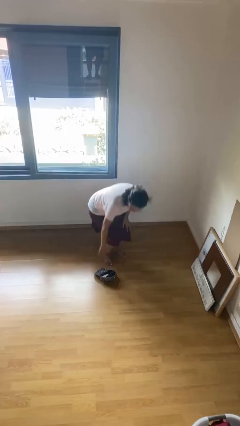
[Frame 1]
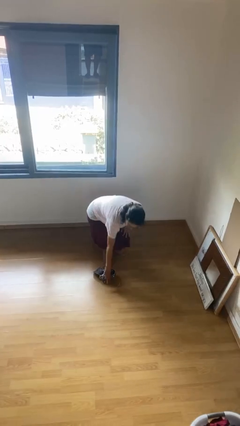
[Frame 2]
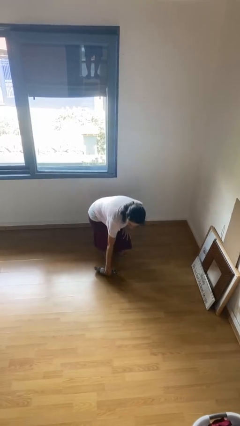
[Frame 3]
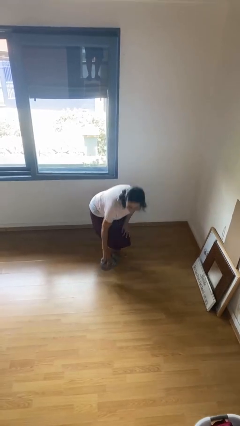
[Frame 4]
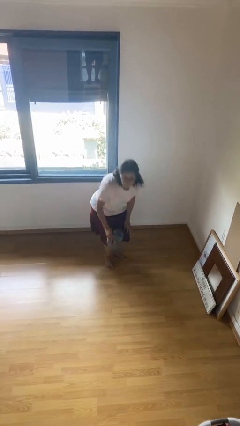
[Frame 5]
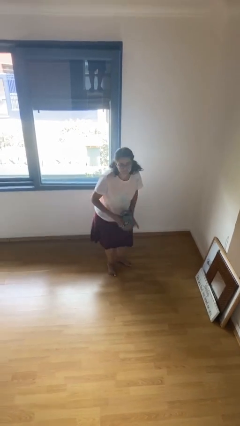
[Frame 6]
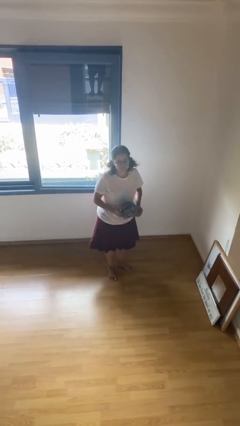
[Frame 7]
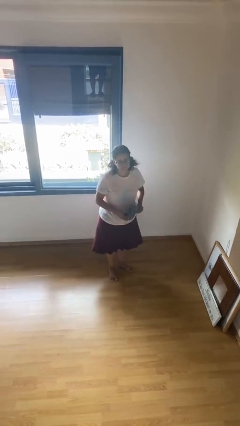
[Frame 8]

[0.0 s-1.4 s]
person picks up object from floor

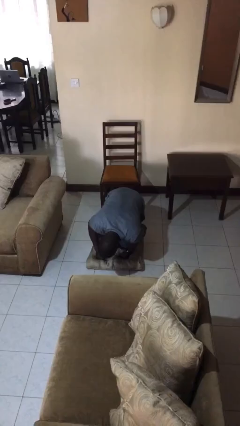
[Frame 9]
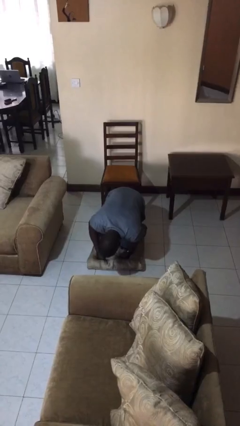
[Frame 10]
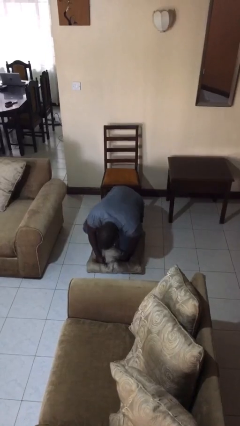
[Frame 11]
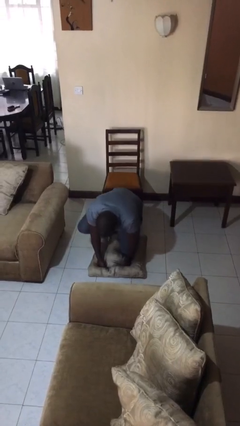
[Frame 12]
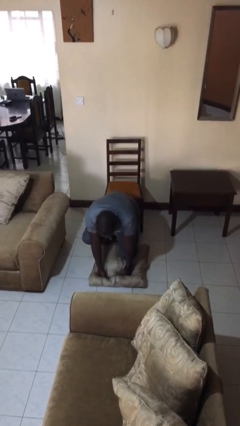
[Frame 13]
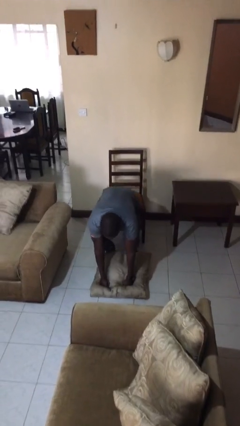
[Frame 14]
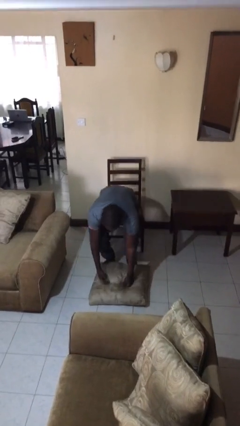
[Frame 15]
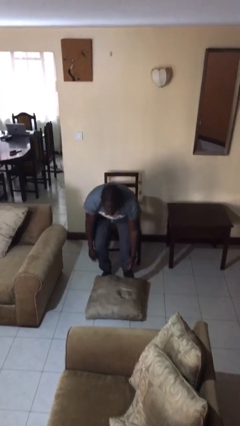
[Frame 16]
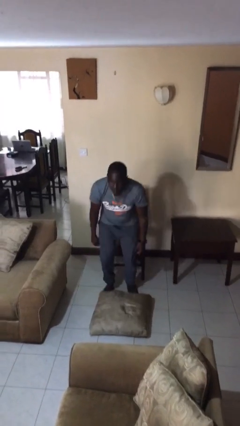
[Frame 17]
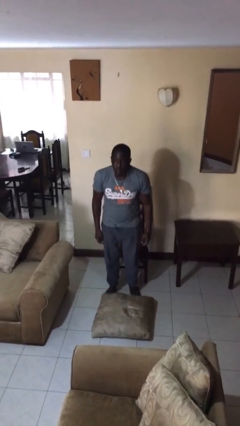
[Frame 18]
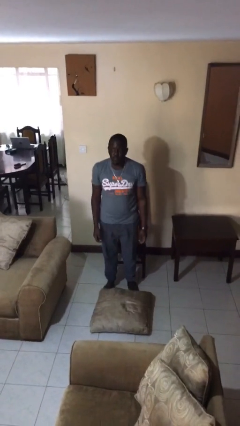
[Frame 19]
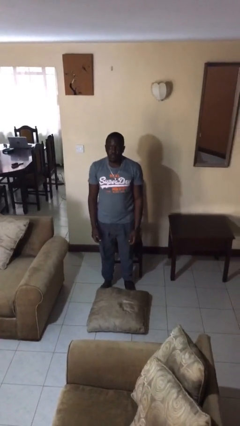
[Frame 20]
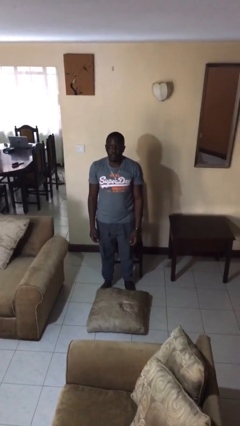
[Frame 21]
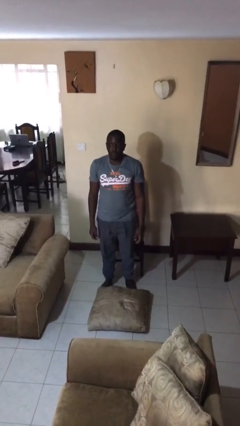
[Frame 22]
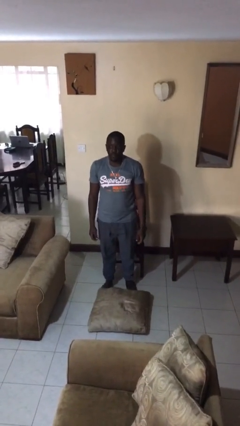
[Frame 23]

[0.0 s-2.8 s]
person stands up from floor

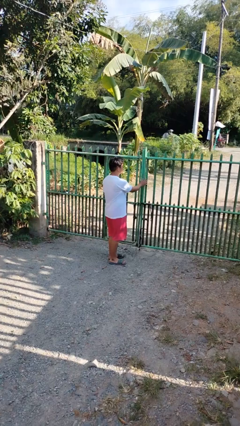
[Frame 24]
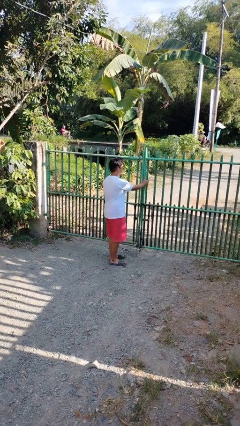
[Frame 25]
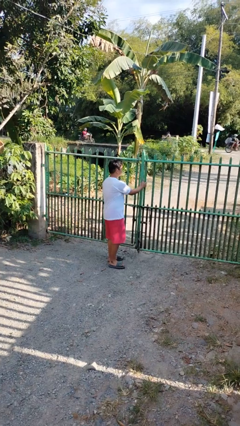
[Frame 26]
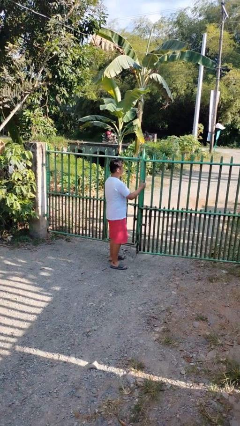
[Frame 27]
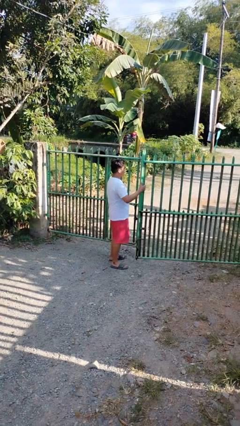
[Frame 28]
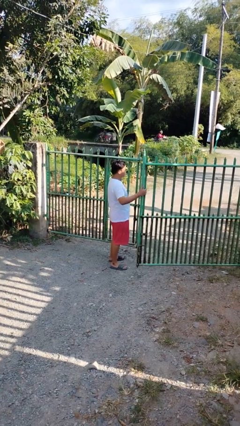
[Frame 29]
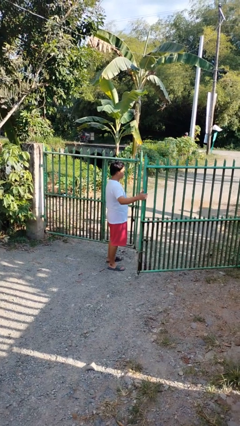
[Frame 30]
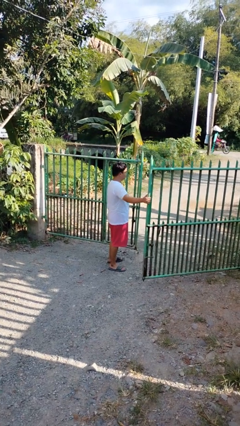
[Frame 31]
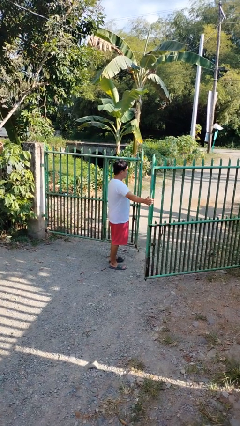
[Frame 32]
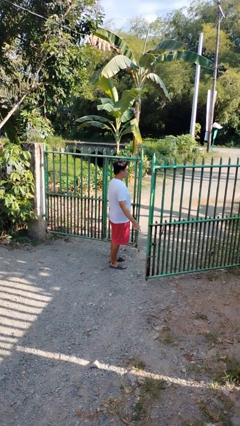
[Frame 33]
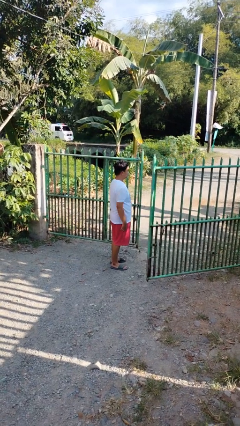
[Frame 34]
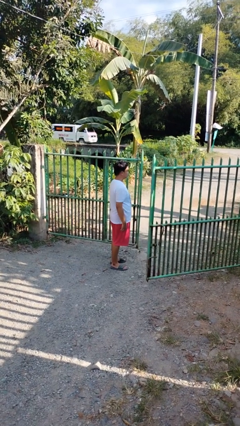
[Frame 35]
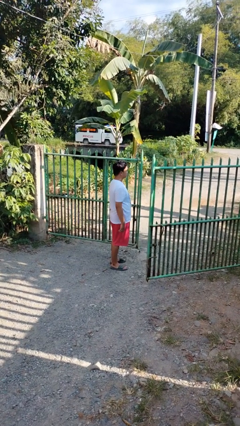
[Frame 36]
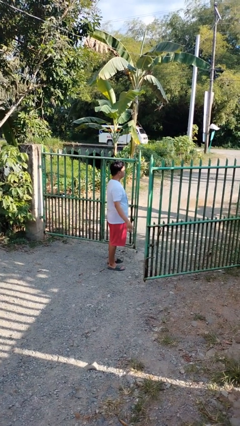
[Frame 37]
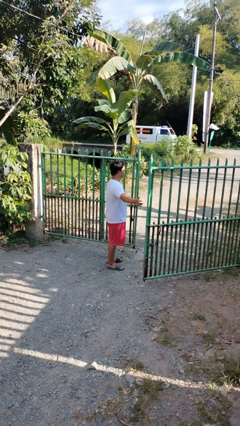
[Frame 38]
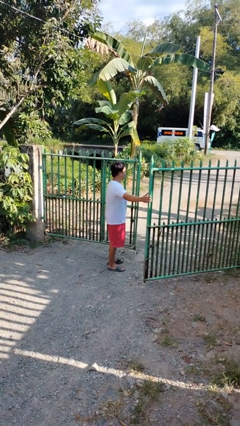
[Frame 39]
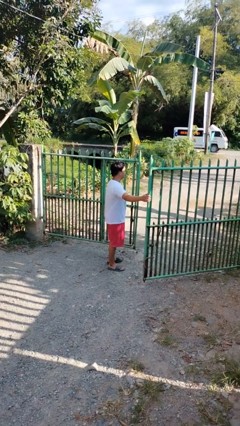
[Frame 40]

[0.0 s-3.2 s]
person opens gate

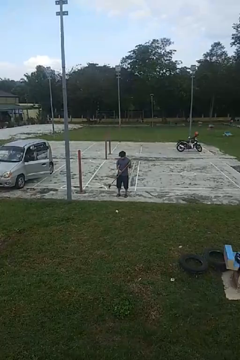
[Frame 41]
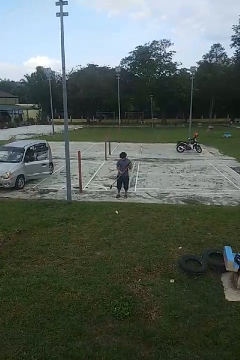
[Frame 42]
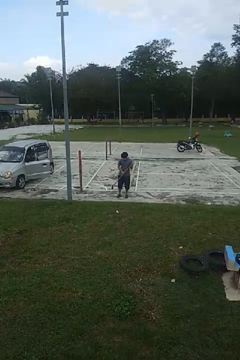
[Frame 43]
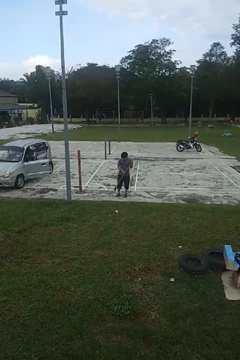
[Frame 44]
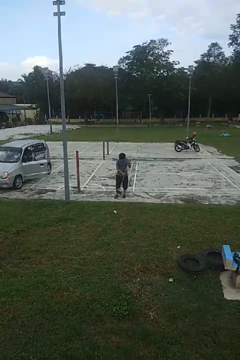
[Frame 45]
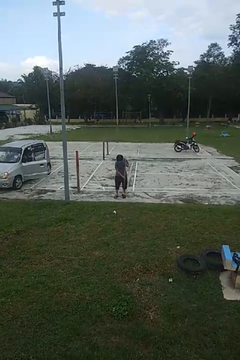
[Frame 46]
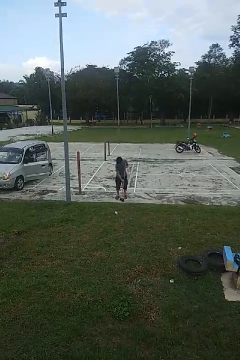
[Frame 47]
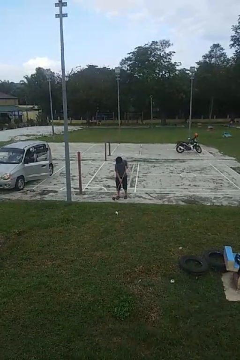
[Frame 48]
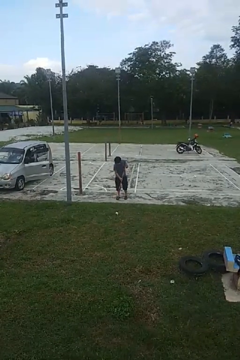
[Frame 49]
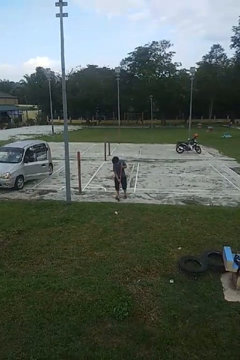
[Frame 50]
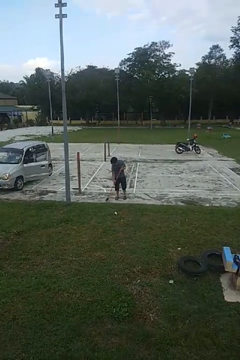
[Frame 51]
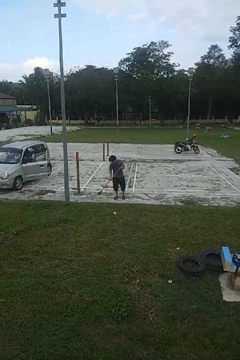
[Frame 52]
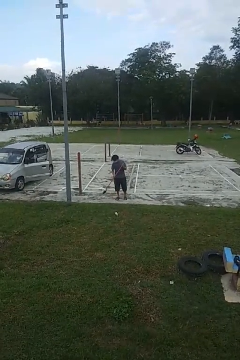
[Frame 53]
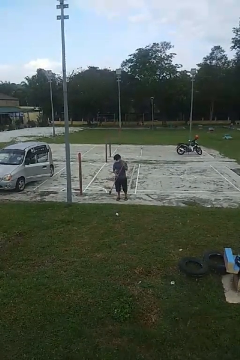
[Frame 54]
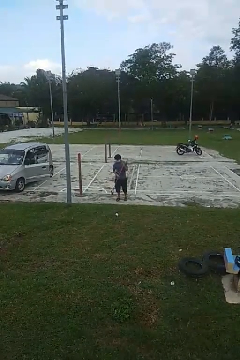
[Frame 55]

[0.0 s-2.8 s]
person sweeps floor

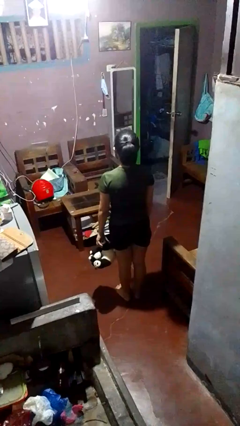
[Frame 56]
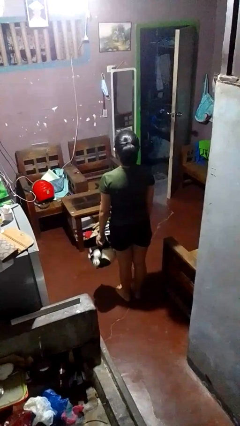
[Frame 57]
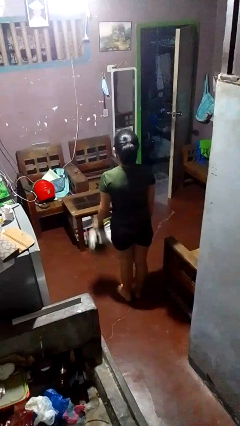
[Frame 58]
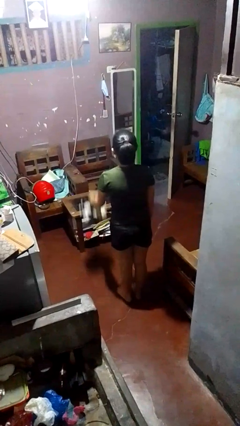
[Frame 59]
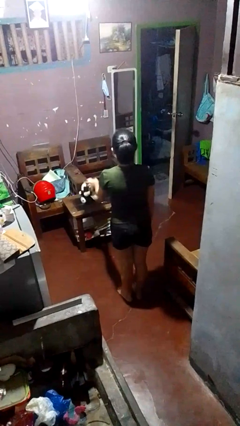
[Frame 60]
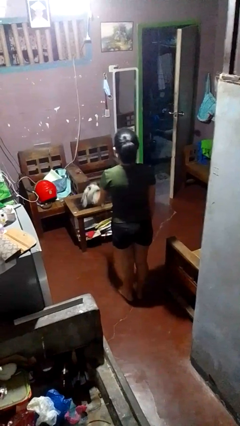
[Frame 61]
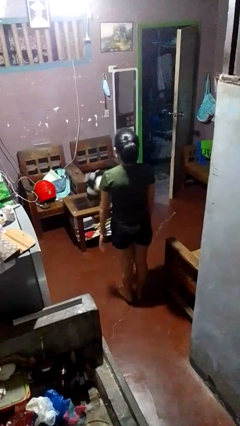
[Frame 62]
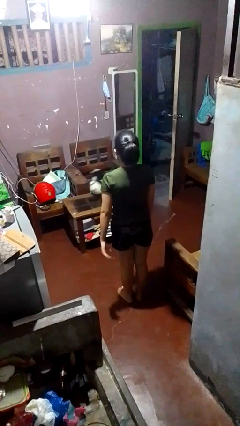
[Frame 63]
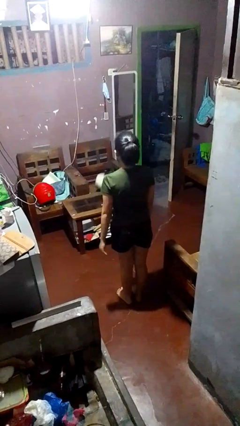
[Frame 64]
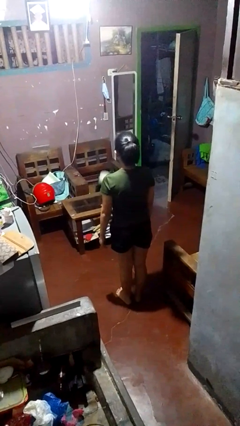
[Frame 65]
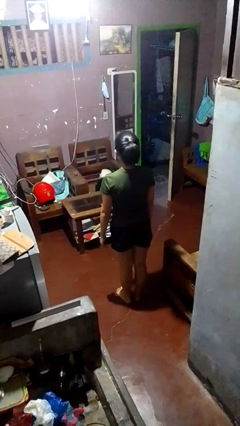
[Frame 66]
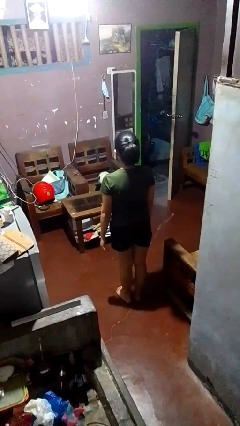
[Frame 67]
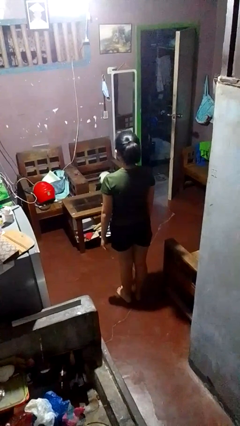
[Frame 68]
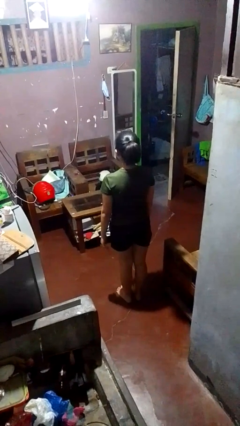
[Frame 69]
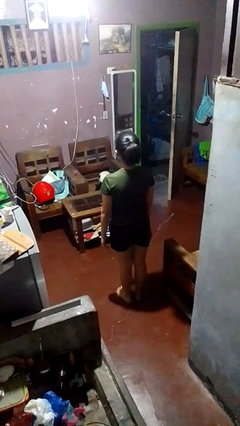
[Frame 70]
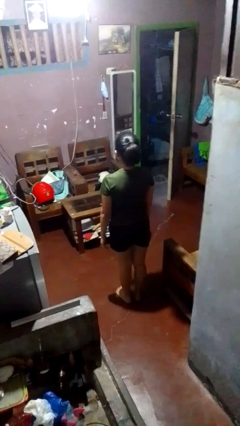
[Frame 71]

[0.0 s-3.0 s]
person throws object on table

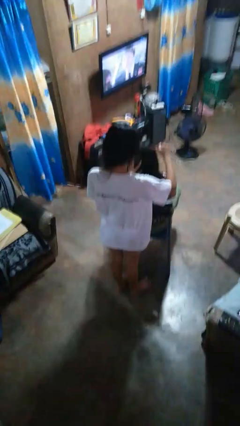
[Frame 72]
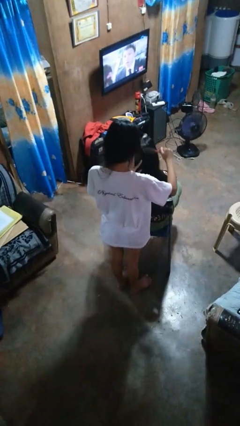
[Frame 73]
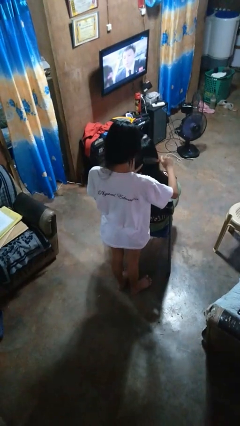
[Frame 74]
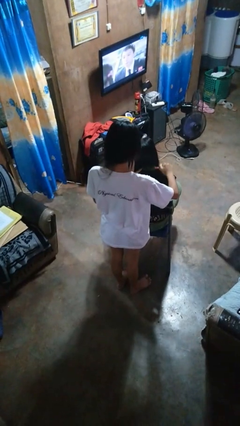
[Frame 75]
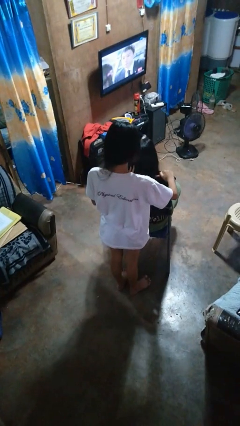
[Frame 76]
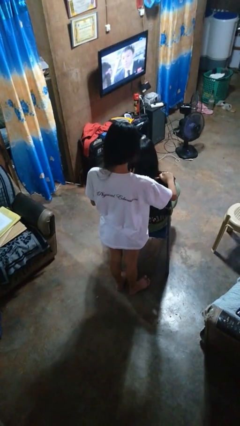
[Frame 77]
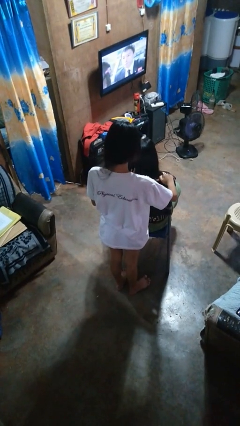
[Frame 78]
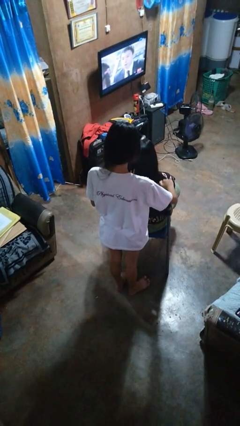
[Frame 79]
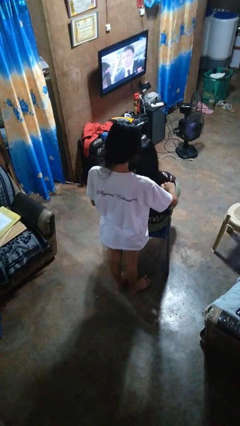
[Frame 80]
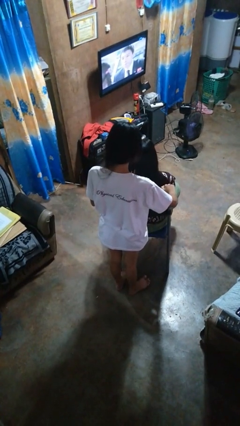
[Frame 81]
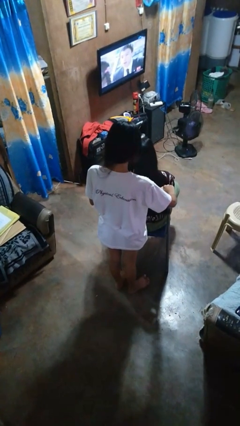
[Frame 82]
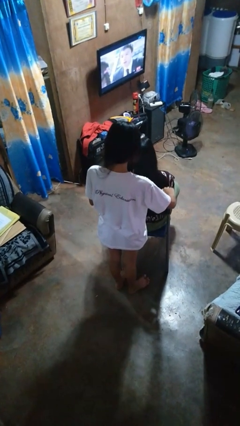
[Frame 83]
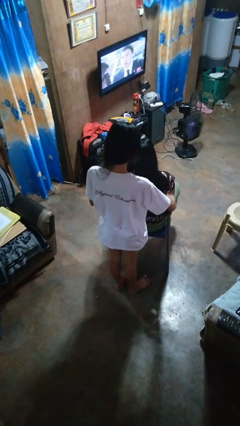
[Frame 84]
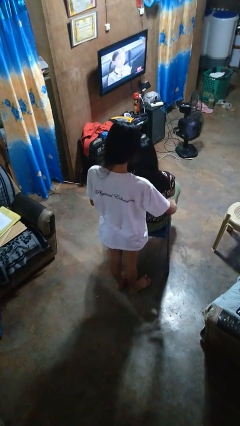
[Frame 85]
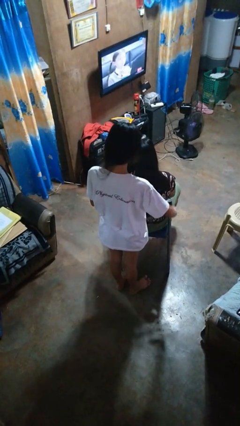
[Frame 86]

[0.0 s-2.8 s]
person brushes hair of person

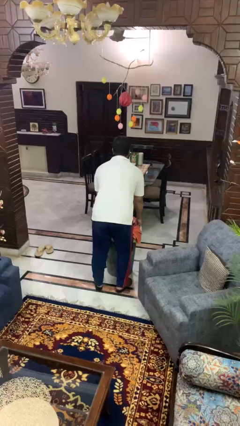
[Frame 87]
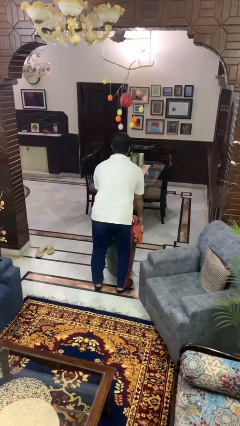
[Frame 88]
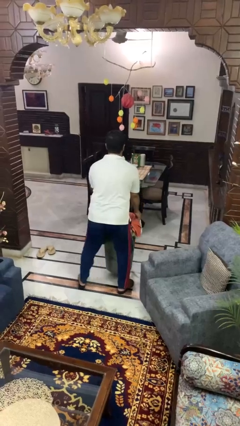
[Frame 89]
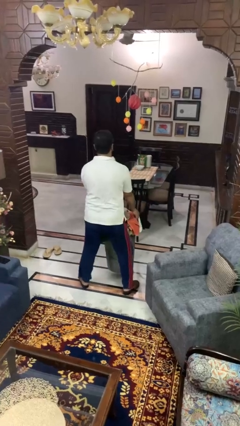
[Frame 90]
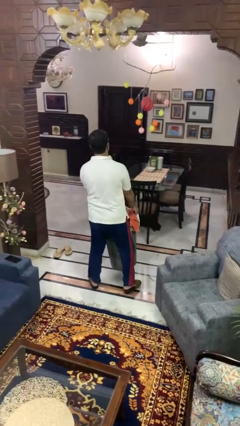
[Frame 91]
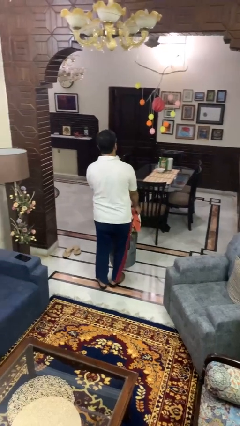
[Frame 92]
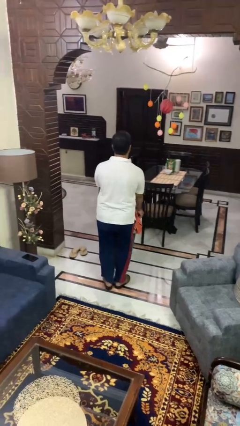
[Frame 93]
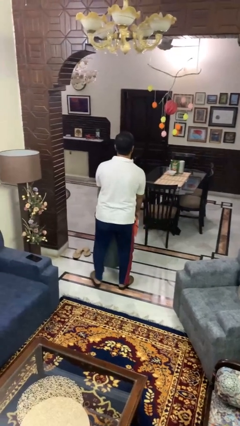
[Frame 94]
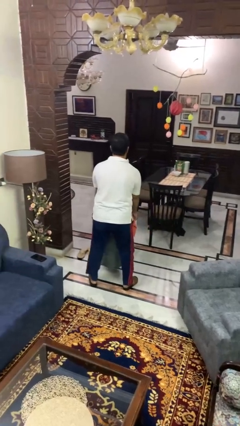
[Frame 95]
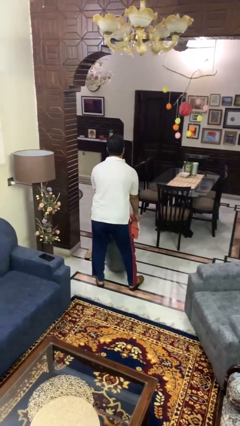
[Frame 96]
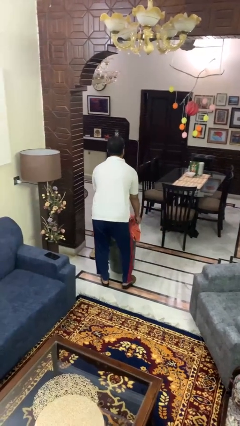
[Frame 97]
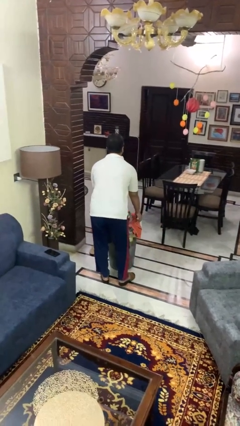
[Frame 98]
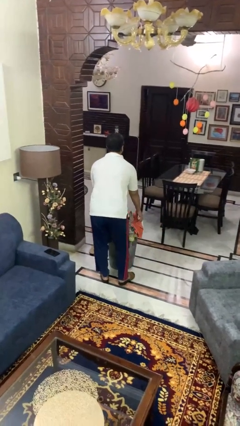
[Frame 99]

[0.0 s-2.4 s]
person carries laundry basket
